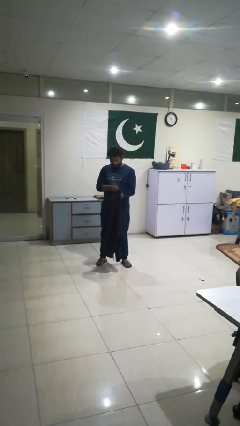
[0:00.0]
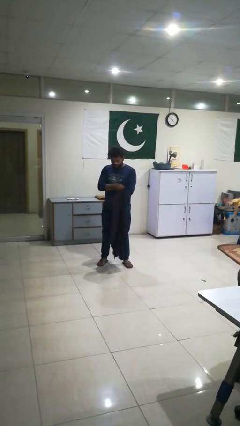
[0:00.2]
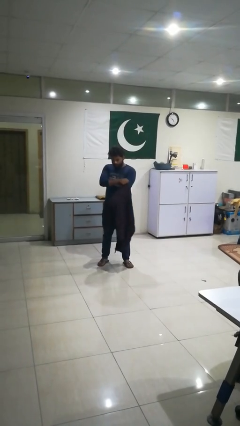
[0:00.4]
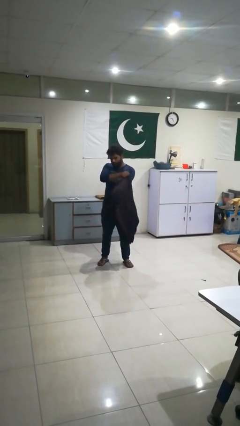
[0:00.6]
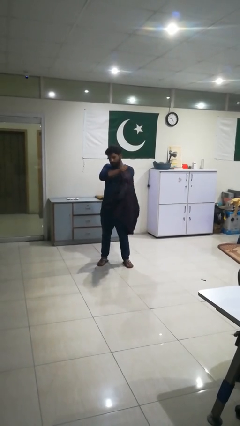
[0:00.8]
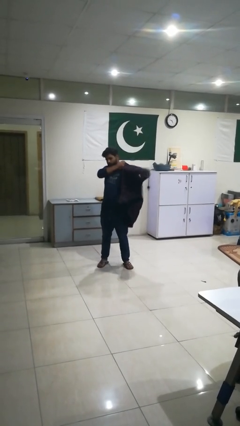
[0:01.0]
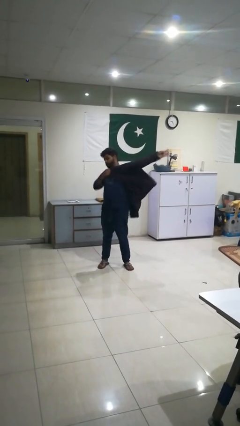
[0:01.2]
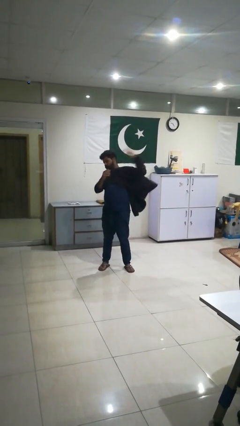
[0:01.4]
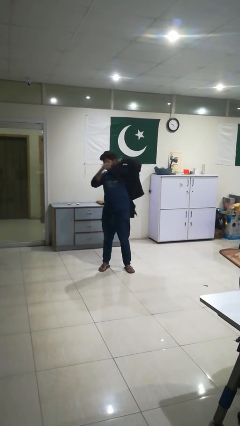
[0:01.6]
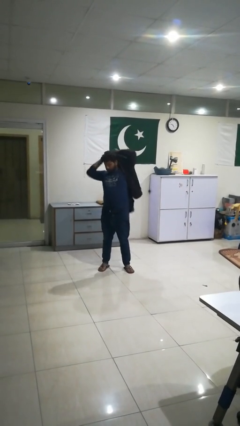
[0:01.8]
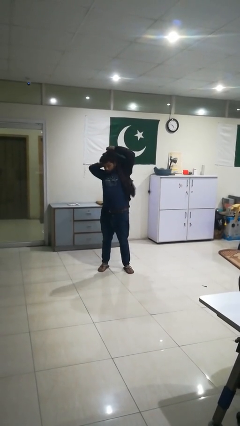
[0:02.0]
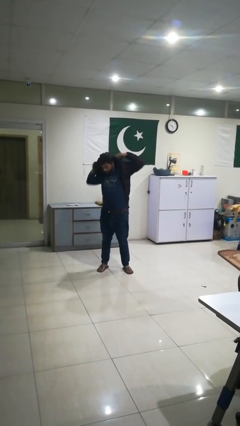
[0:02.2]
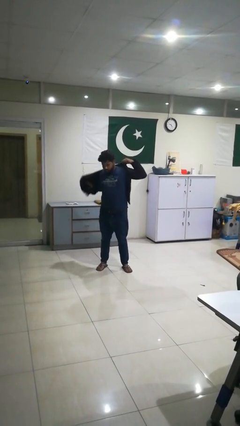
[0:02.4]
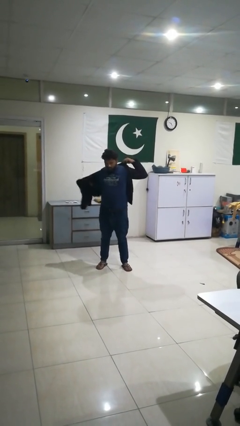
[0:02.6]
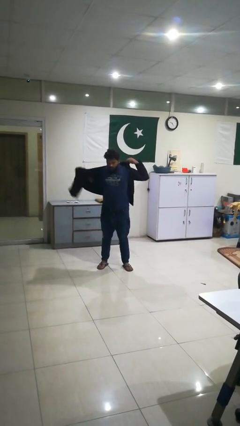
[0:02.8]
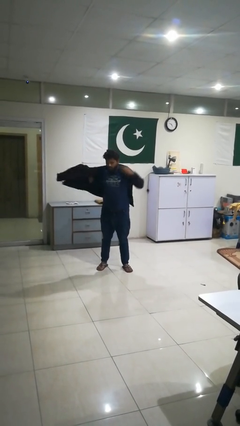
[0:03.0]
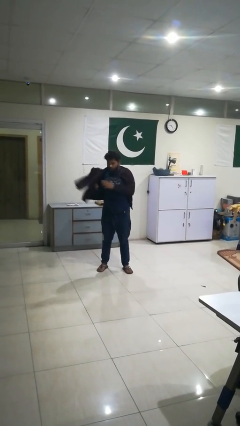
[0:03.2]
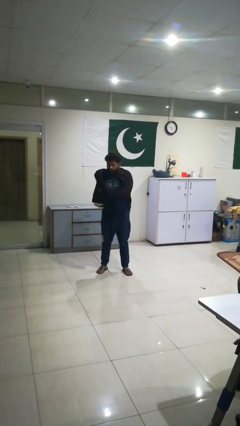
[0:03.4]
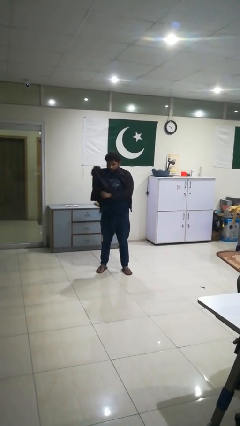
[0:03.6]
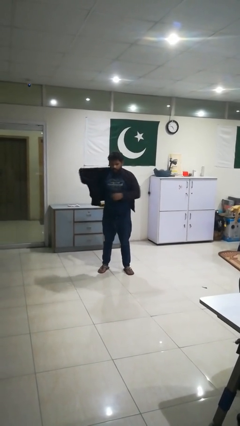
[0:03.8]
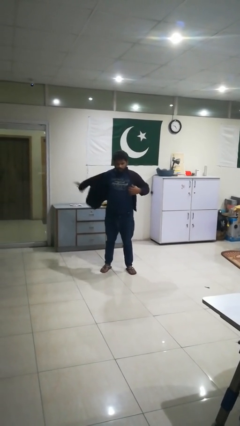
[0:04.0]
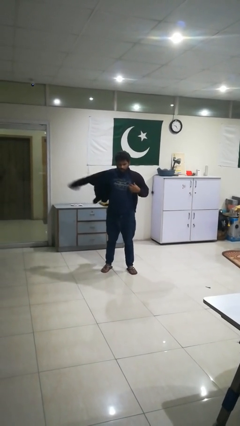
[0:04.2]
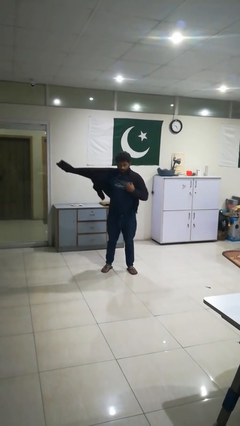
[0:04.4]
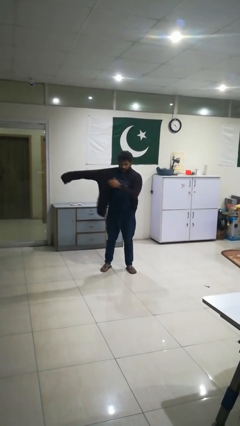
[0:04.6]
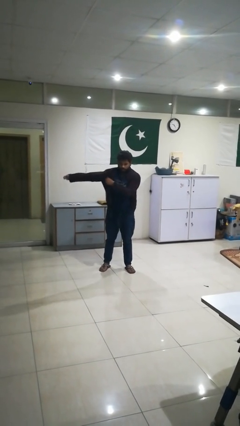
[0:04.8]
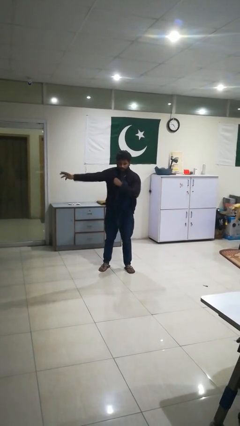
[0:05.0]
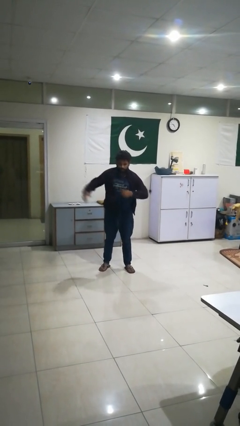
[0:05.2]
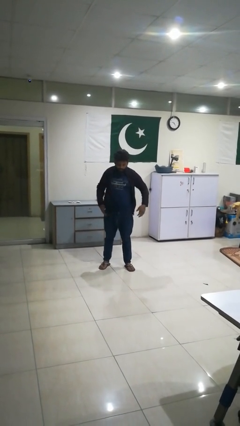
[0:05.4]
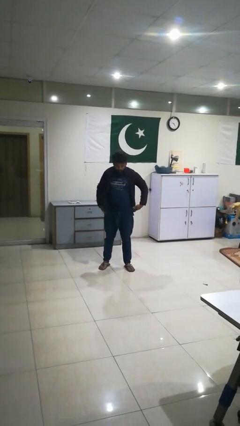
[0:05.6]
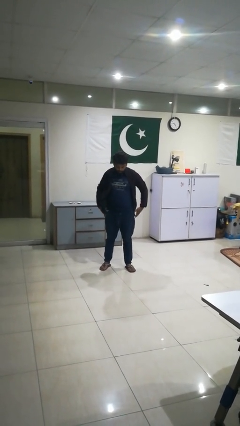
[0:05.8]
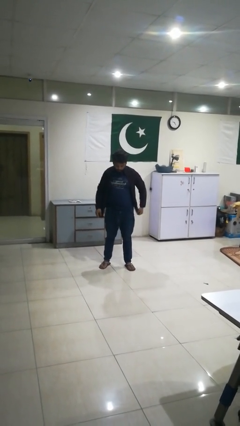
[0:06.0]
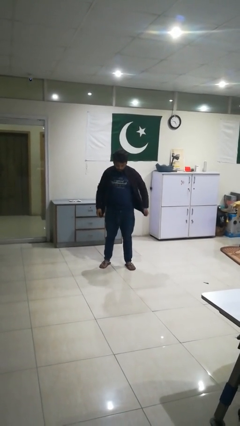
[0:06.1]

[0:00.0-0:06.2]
person puts on jacket

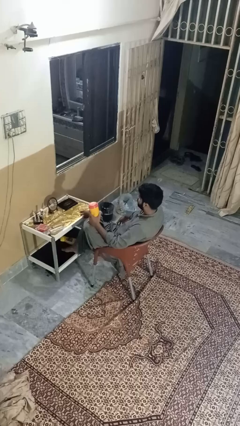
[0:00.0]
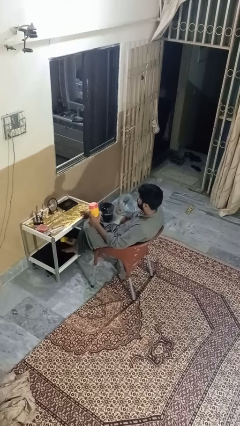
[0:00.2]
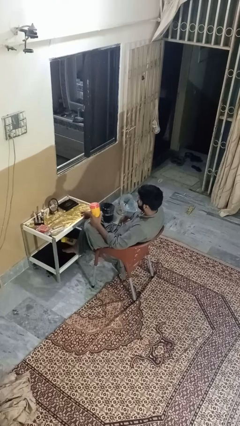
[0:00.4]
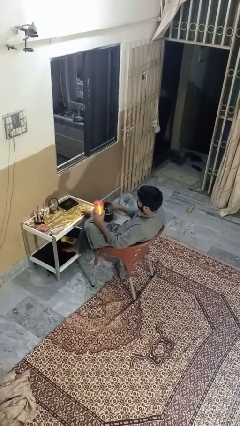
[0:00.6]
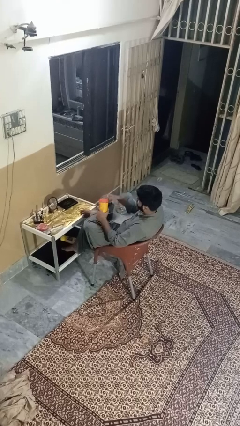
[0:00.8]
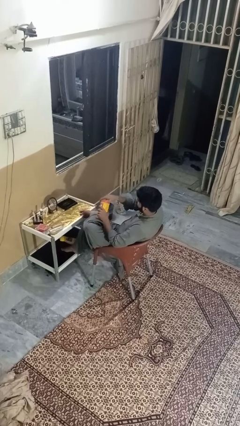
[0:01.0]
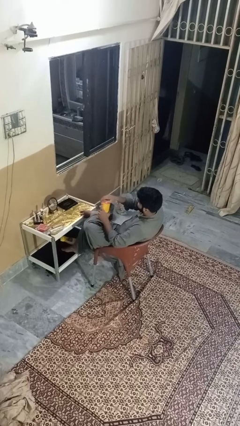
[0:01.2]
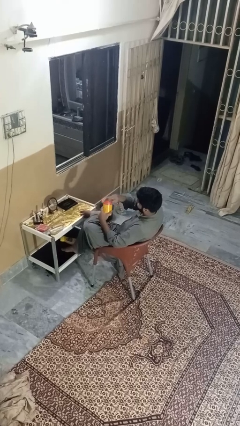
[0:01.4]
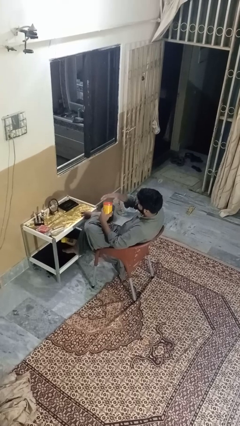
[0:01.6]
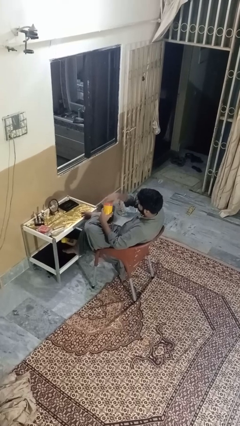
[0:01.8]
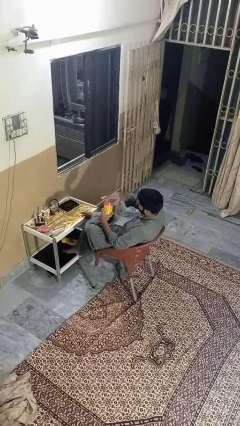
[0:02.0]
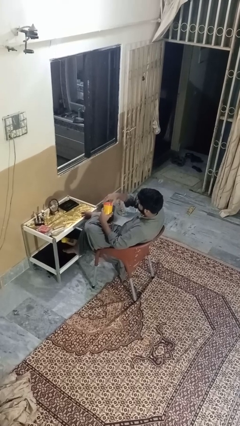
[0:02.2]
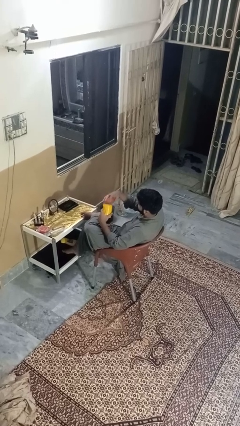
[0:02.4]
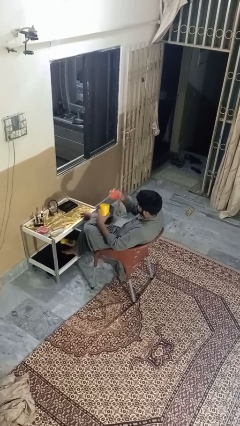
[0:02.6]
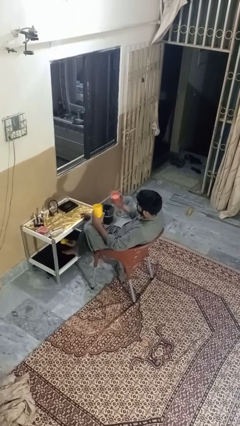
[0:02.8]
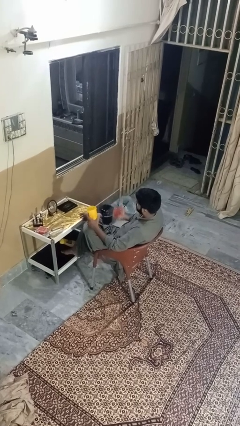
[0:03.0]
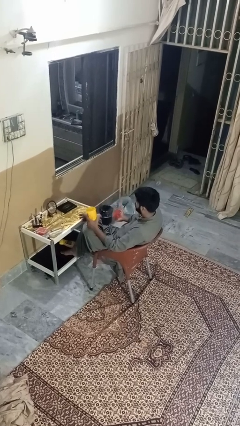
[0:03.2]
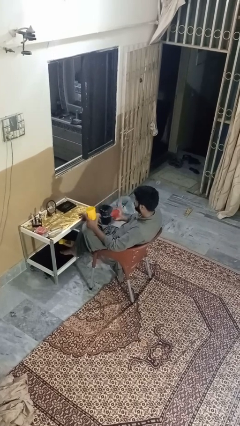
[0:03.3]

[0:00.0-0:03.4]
person opens jar

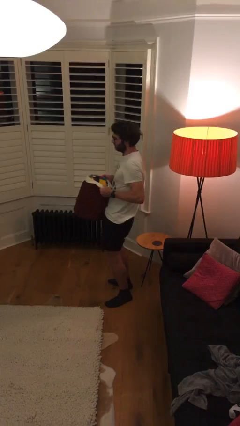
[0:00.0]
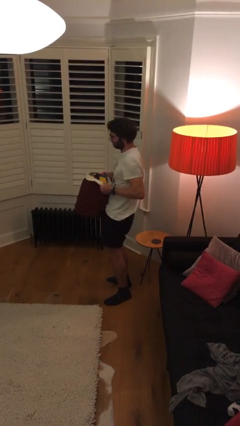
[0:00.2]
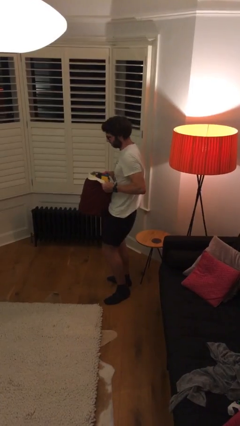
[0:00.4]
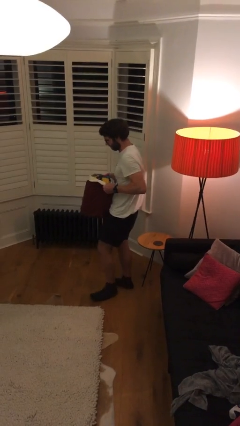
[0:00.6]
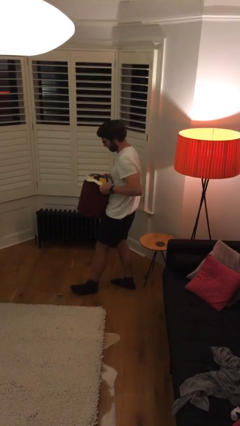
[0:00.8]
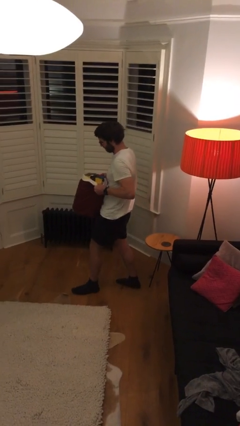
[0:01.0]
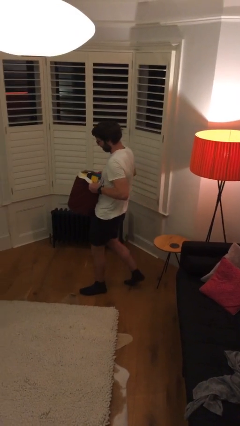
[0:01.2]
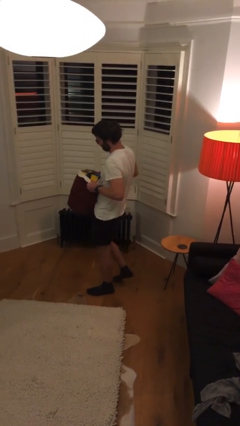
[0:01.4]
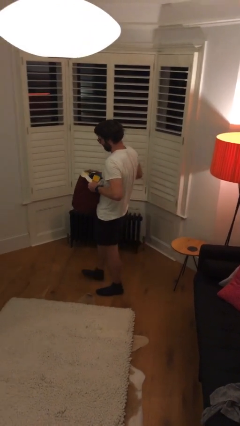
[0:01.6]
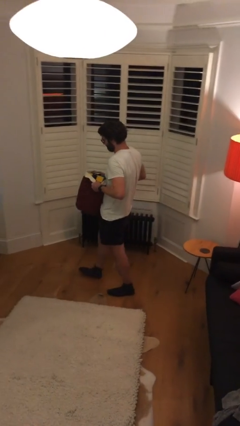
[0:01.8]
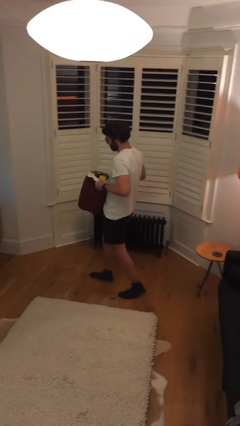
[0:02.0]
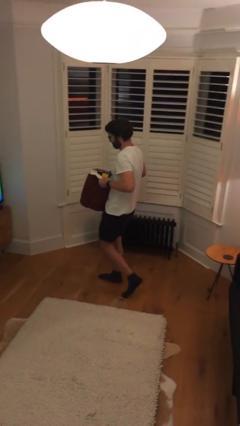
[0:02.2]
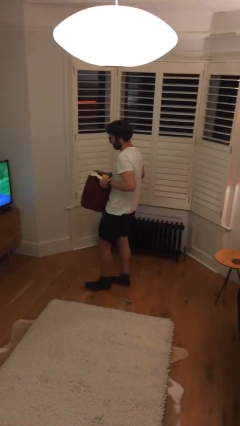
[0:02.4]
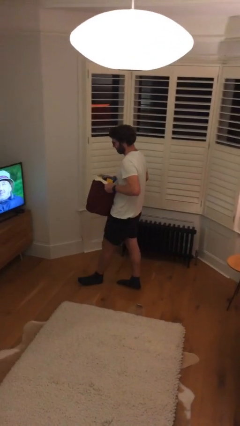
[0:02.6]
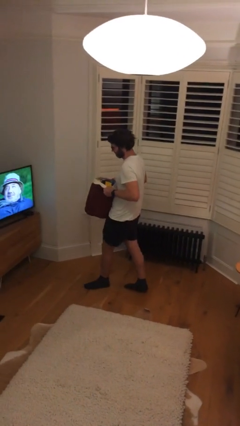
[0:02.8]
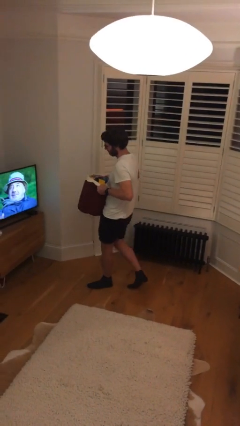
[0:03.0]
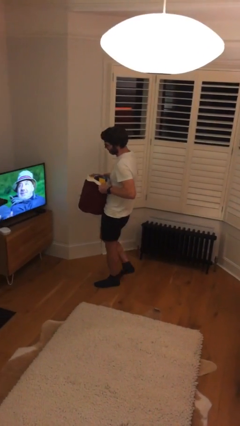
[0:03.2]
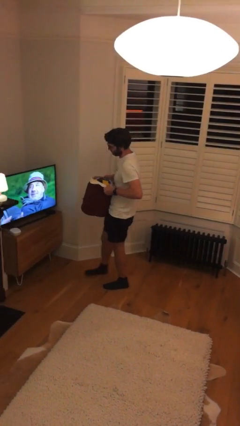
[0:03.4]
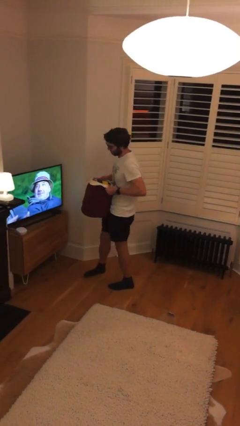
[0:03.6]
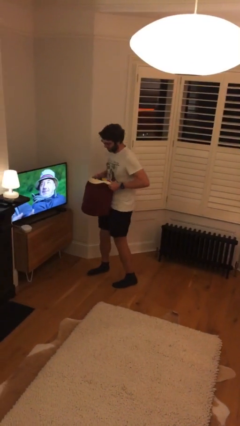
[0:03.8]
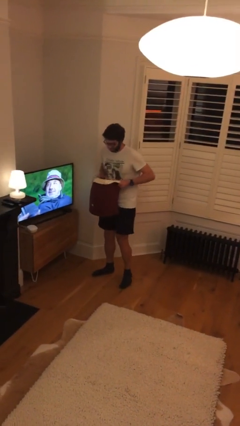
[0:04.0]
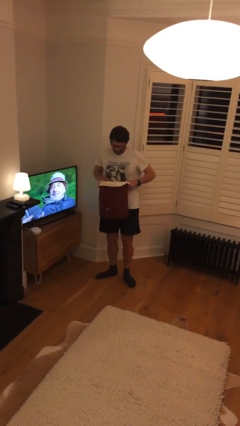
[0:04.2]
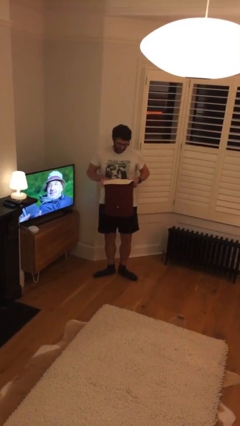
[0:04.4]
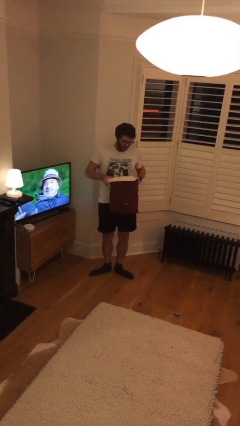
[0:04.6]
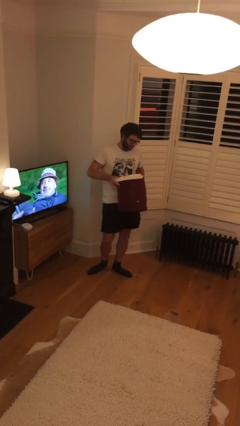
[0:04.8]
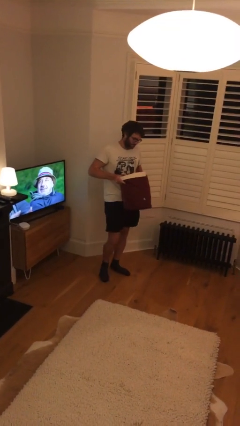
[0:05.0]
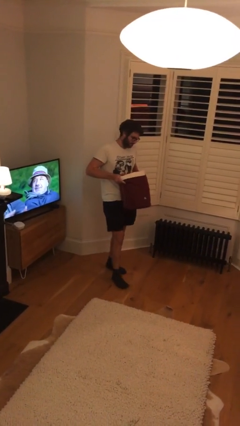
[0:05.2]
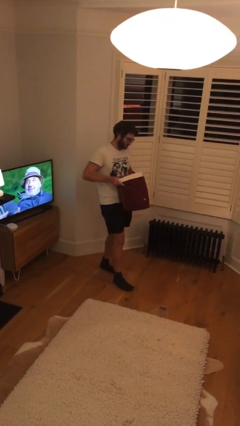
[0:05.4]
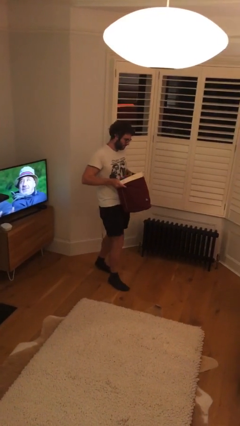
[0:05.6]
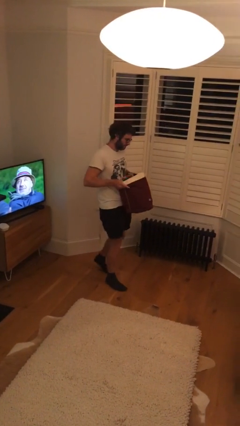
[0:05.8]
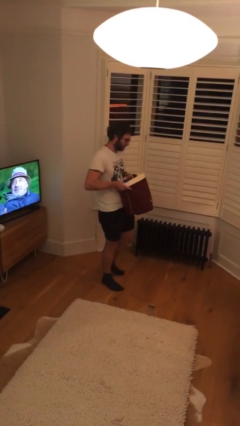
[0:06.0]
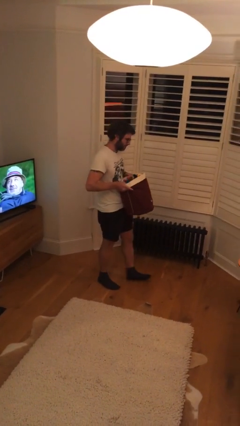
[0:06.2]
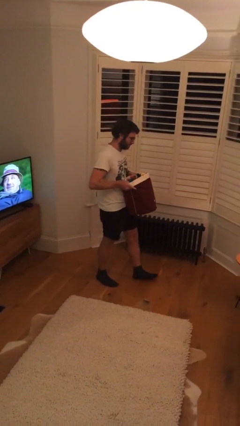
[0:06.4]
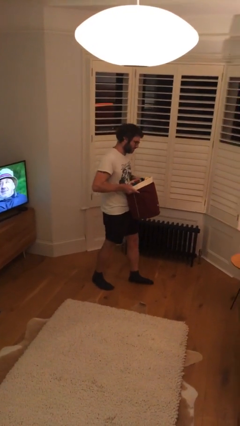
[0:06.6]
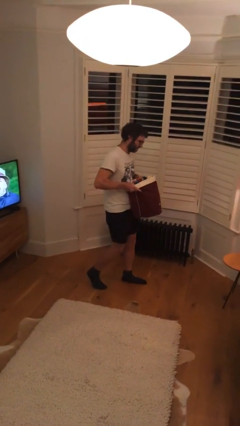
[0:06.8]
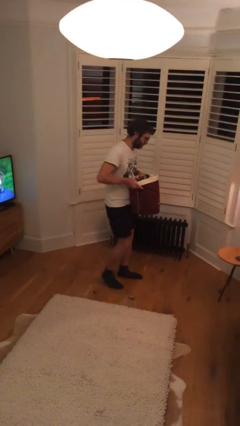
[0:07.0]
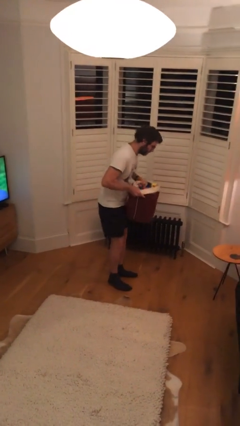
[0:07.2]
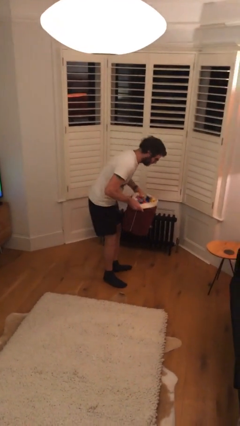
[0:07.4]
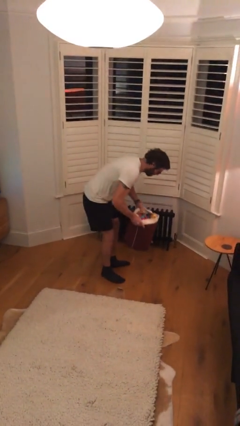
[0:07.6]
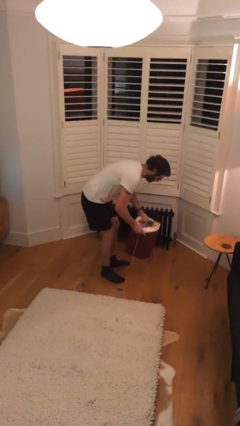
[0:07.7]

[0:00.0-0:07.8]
person carries heavy object

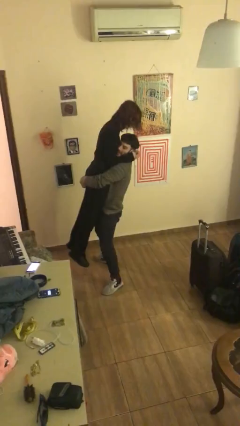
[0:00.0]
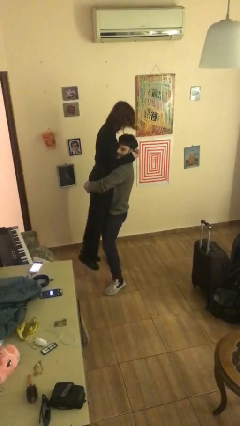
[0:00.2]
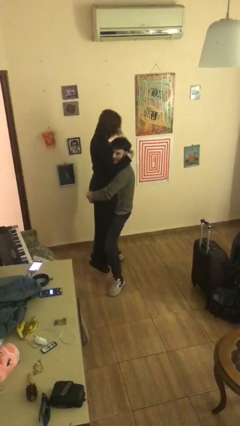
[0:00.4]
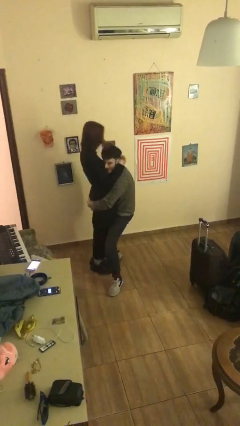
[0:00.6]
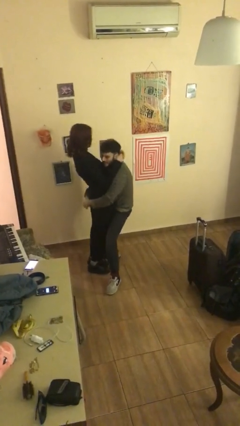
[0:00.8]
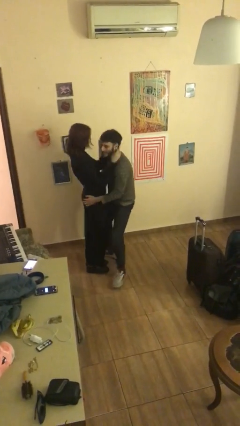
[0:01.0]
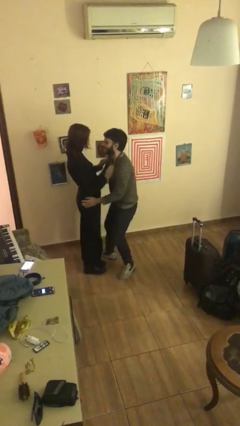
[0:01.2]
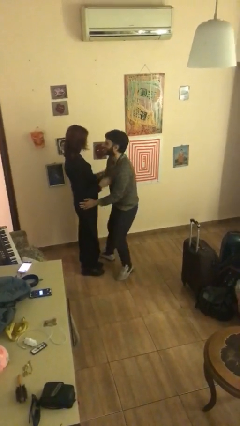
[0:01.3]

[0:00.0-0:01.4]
person puts down person
